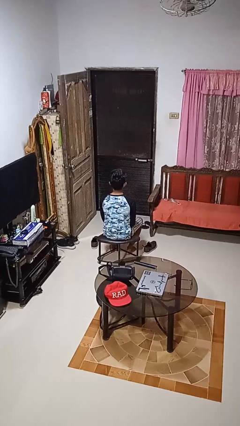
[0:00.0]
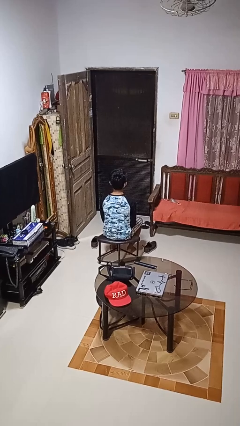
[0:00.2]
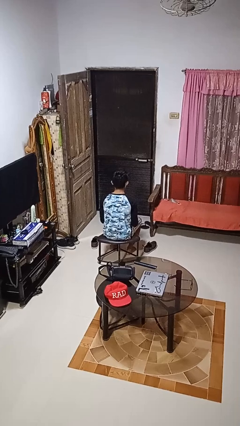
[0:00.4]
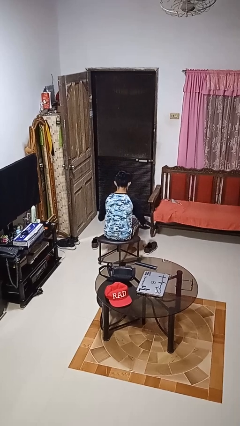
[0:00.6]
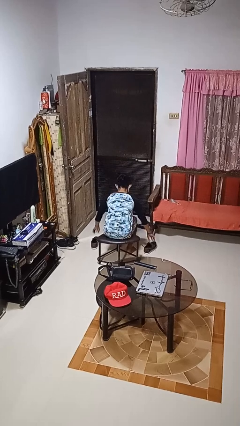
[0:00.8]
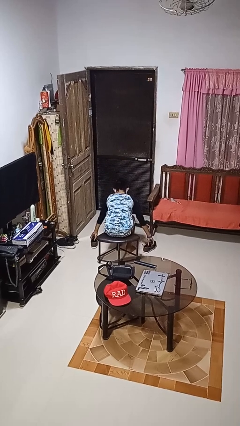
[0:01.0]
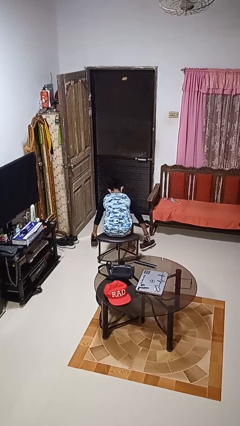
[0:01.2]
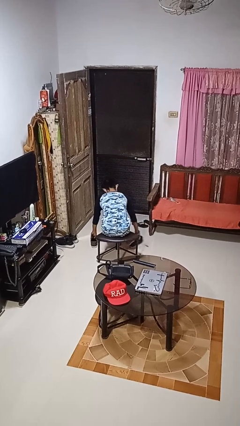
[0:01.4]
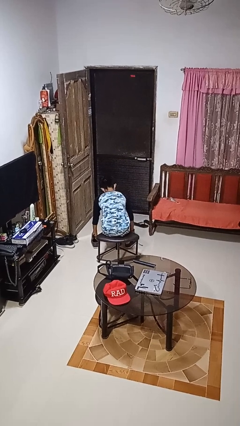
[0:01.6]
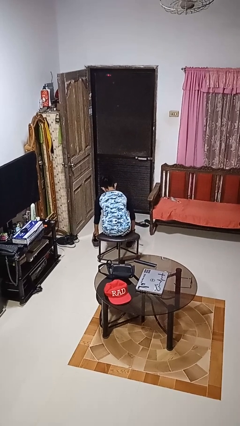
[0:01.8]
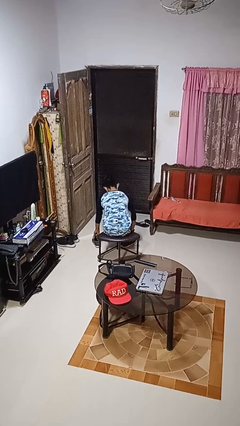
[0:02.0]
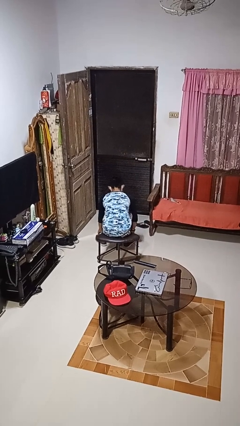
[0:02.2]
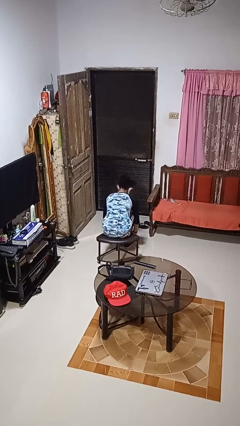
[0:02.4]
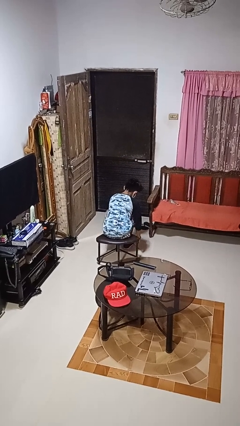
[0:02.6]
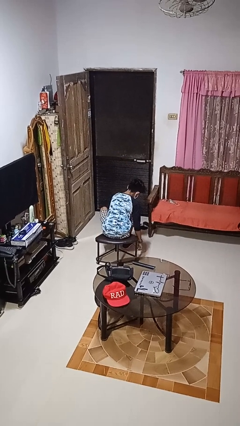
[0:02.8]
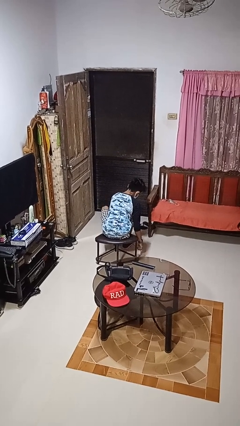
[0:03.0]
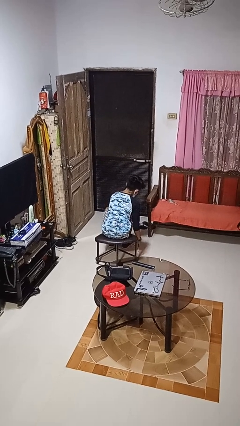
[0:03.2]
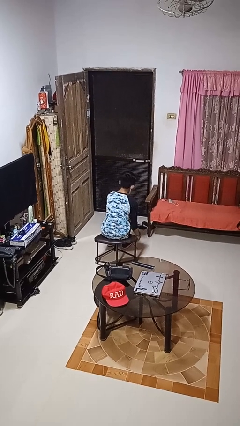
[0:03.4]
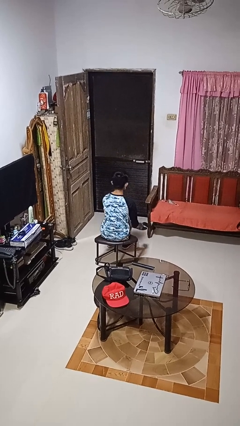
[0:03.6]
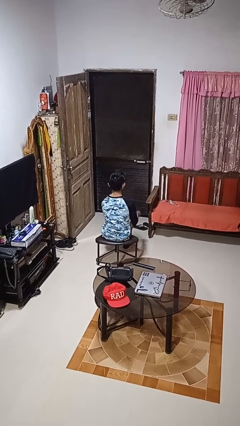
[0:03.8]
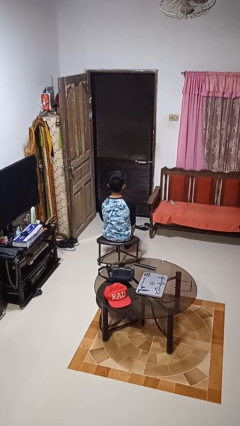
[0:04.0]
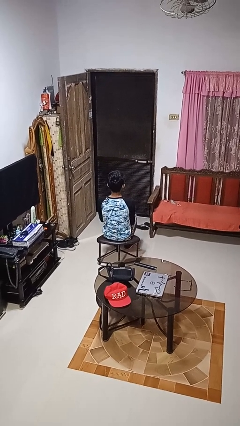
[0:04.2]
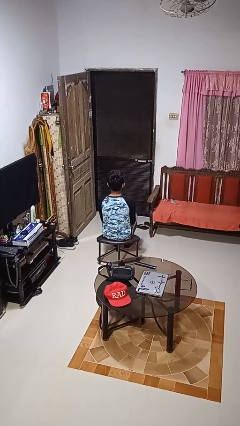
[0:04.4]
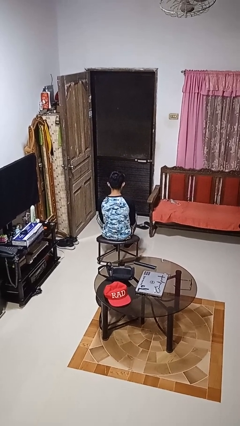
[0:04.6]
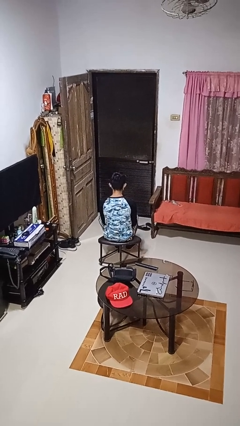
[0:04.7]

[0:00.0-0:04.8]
person puts on shoes

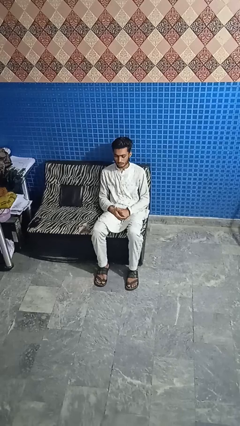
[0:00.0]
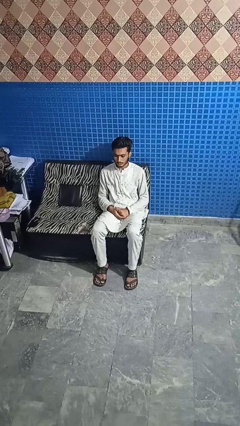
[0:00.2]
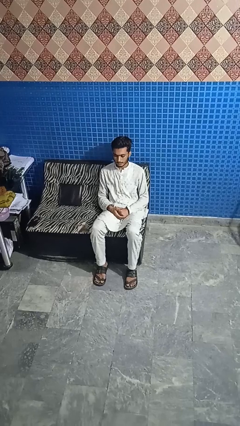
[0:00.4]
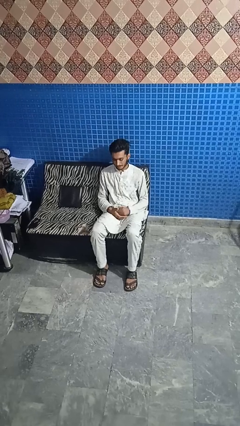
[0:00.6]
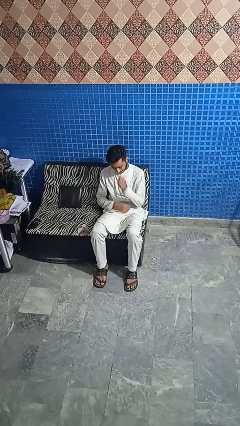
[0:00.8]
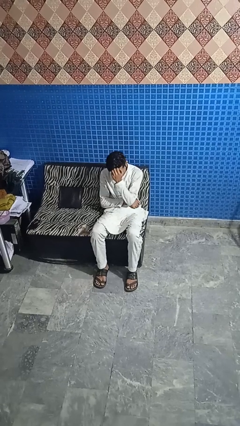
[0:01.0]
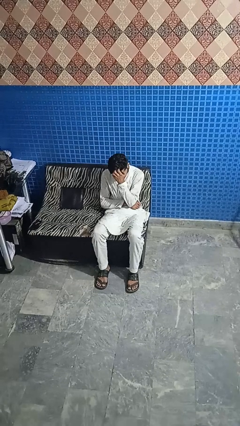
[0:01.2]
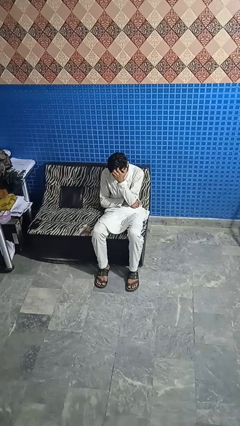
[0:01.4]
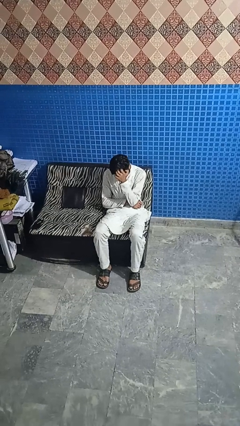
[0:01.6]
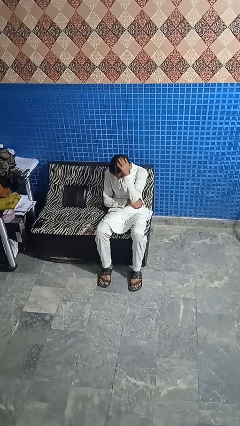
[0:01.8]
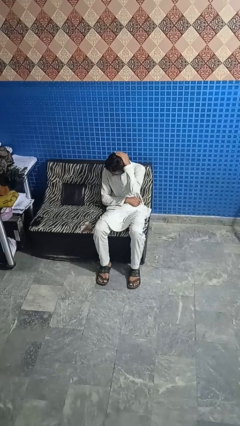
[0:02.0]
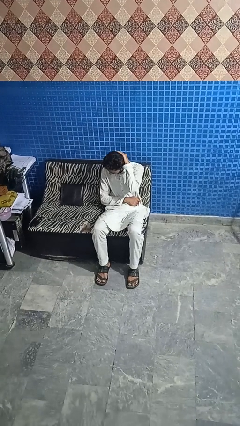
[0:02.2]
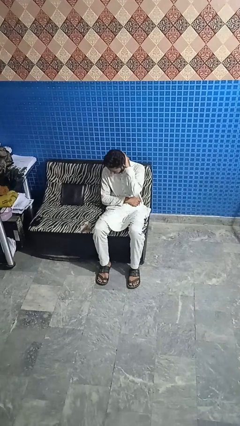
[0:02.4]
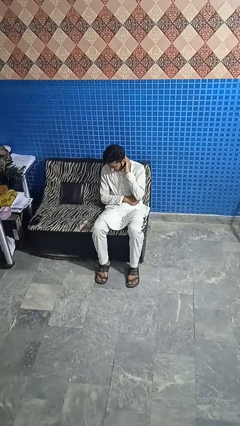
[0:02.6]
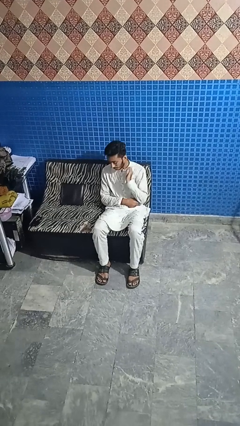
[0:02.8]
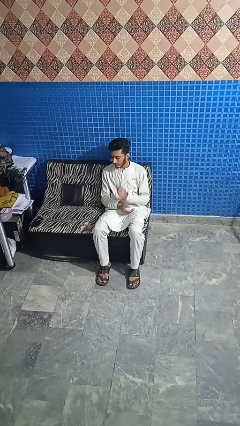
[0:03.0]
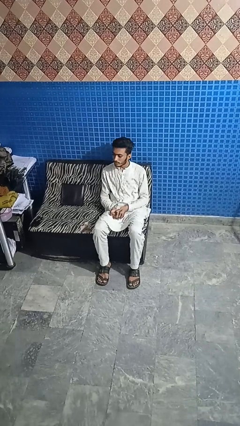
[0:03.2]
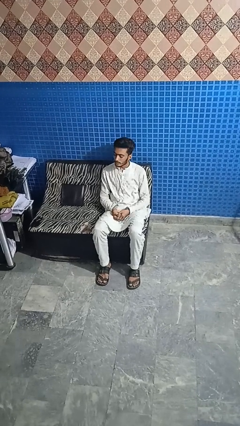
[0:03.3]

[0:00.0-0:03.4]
person strokes hair

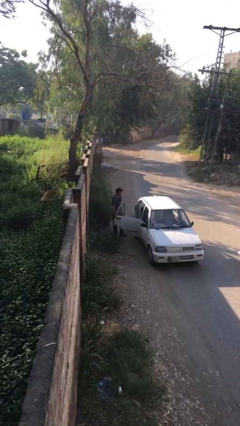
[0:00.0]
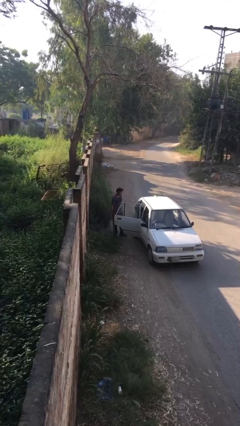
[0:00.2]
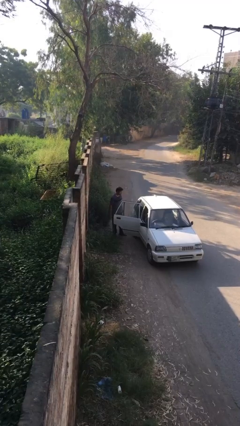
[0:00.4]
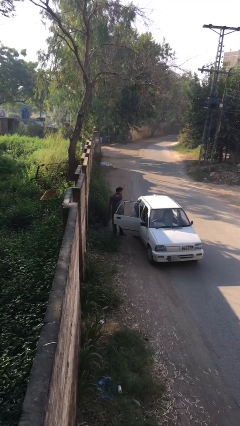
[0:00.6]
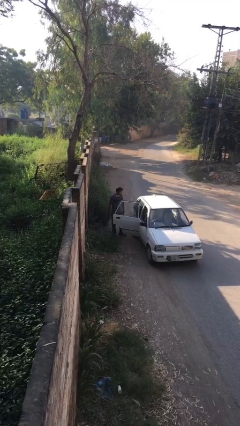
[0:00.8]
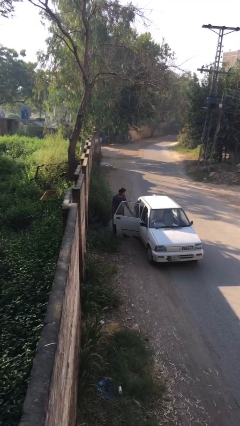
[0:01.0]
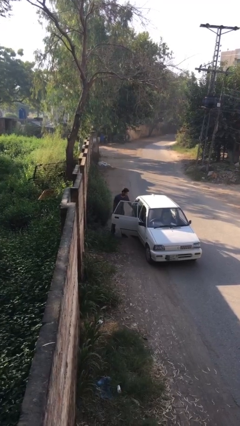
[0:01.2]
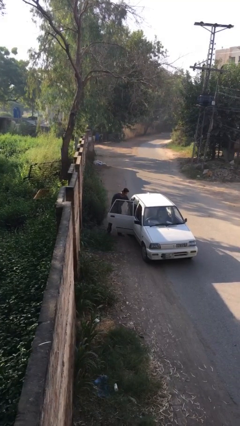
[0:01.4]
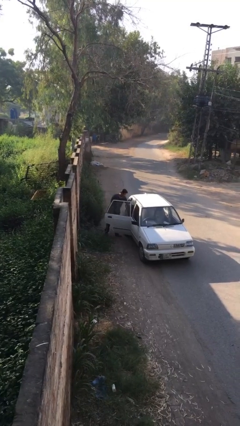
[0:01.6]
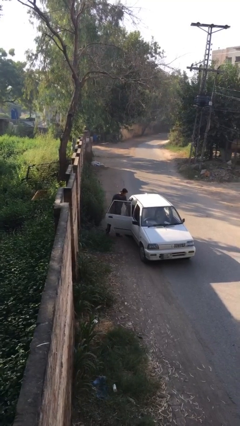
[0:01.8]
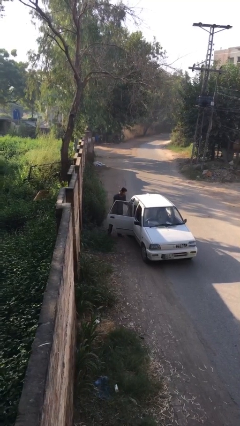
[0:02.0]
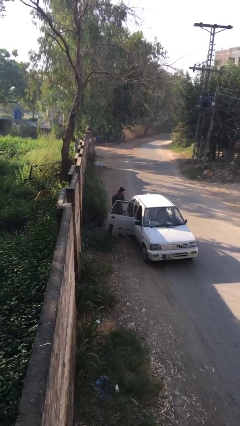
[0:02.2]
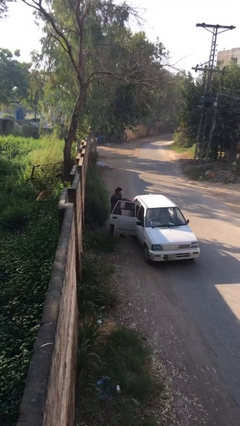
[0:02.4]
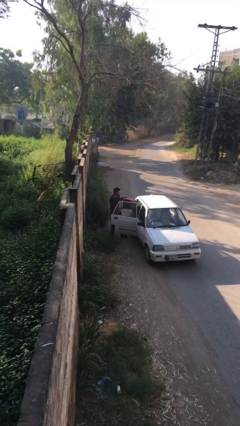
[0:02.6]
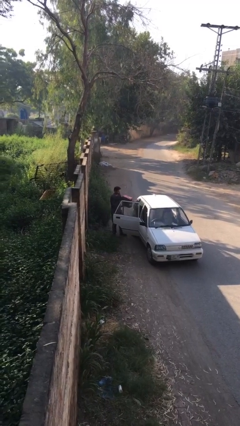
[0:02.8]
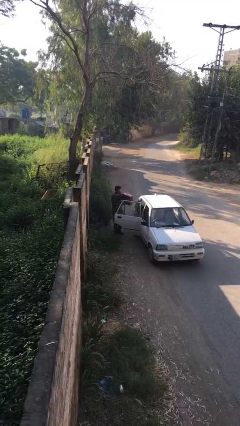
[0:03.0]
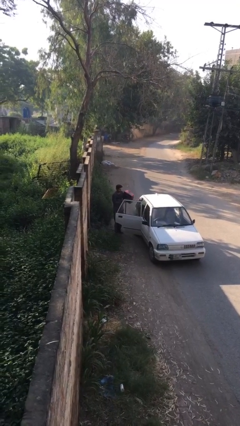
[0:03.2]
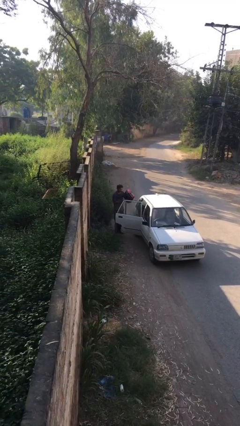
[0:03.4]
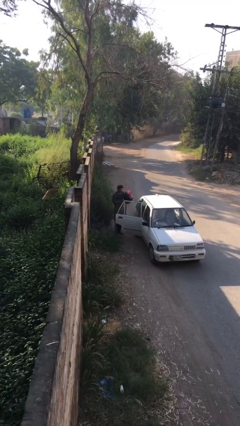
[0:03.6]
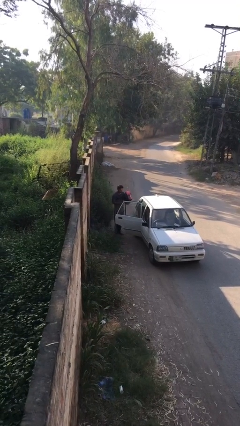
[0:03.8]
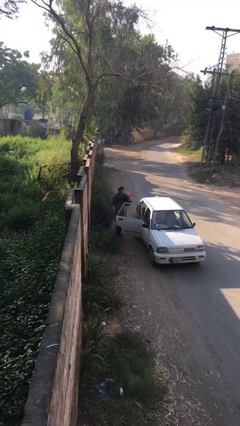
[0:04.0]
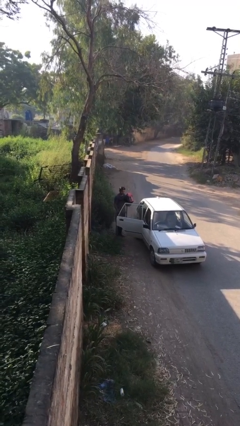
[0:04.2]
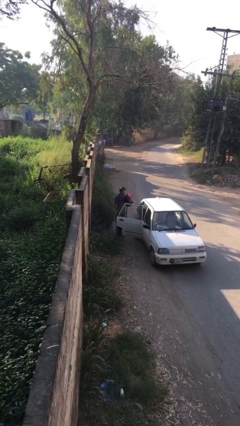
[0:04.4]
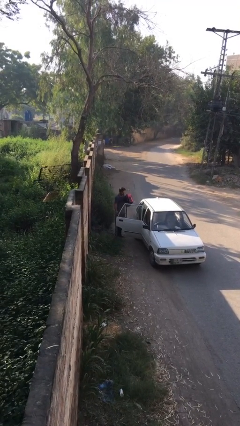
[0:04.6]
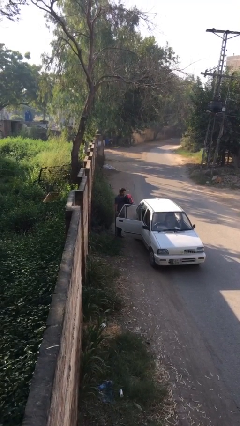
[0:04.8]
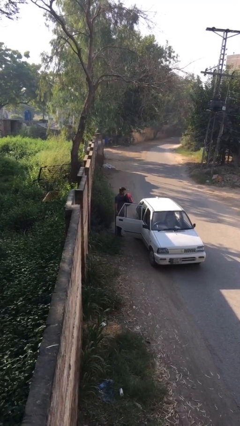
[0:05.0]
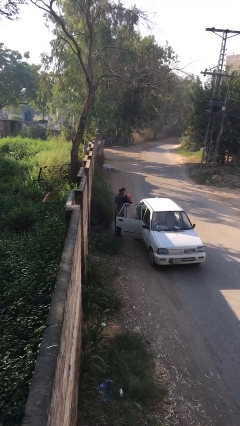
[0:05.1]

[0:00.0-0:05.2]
person unloads car

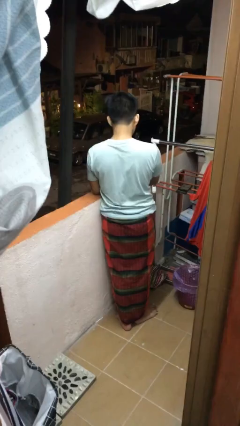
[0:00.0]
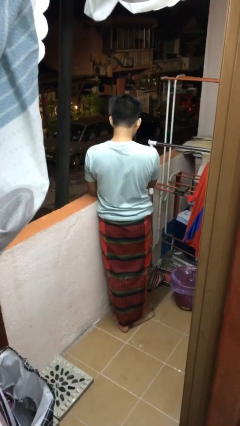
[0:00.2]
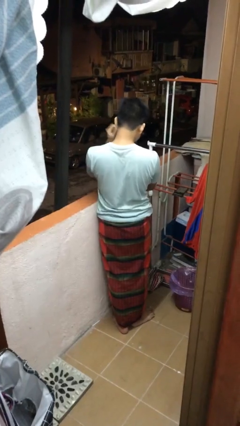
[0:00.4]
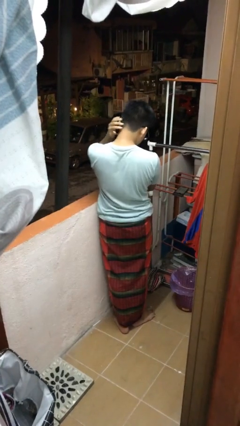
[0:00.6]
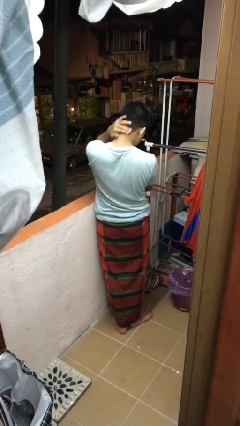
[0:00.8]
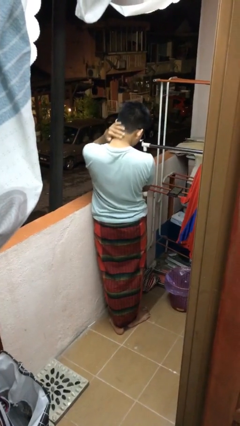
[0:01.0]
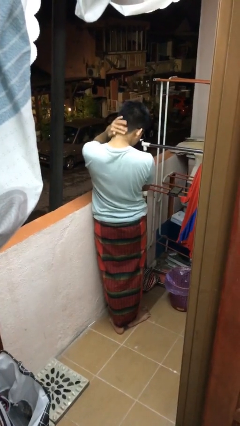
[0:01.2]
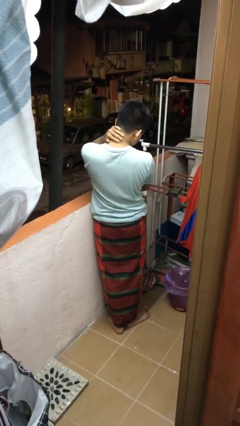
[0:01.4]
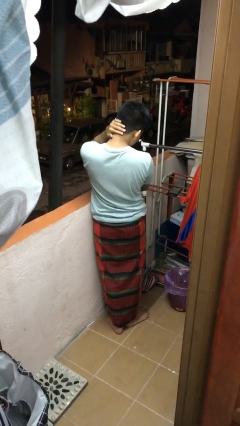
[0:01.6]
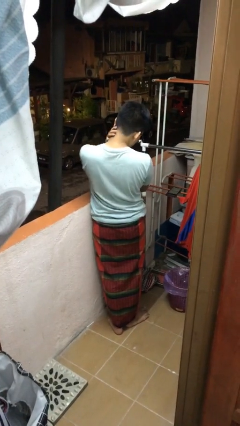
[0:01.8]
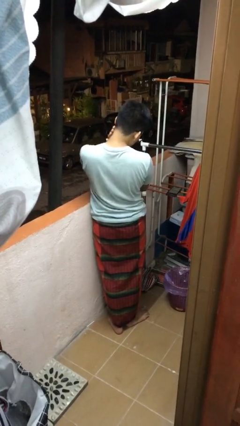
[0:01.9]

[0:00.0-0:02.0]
person rubs neck

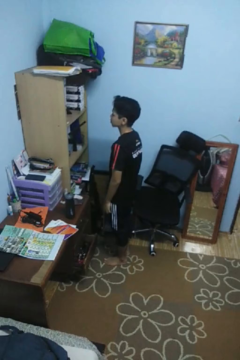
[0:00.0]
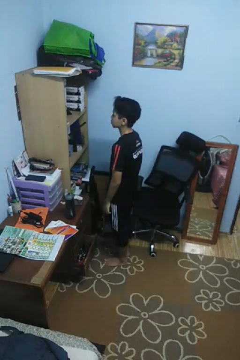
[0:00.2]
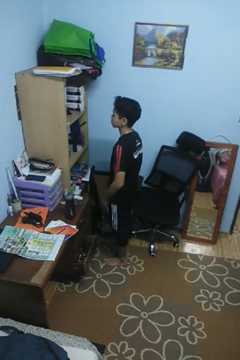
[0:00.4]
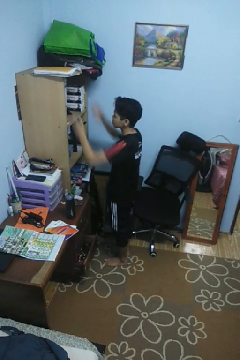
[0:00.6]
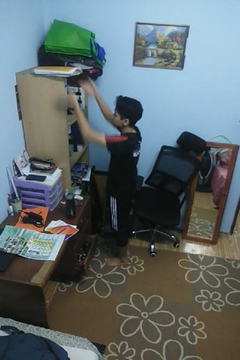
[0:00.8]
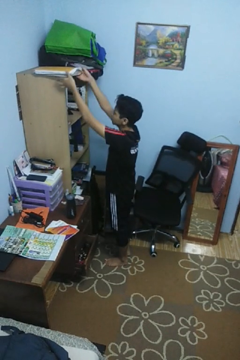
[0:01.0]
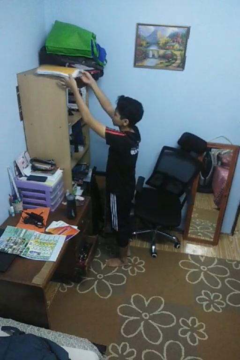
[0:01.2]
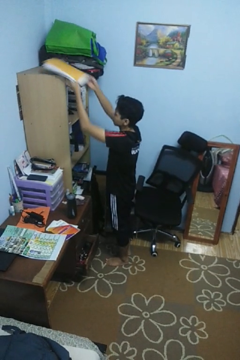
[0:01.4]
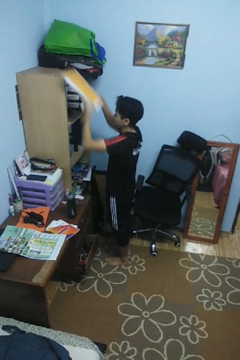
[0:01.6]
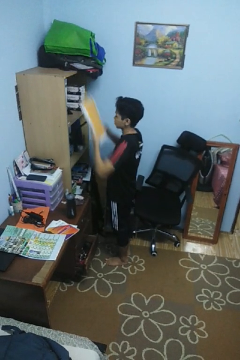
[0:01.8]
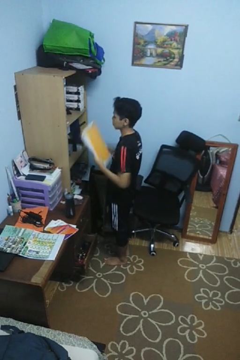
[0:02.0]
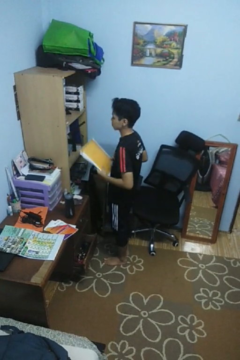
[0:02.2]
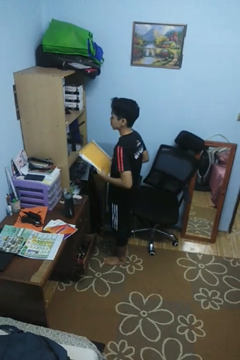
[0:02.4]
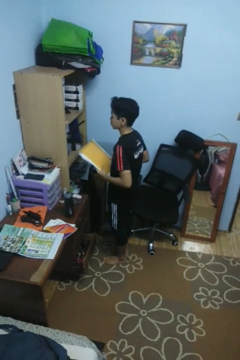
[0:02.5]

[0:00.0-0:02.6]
person picks up object from shelf

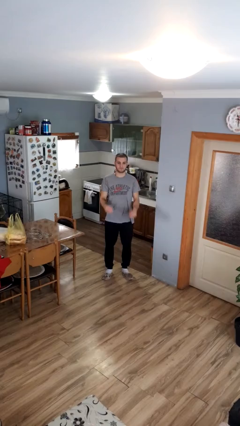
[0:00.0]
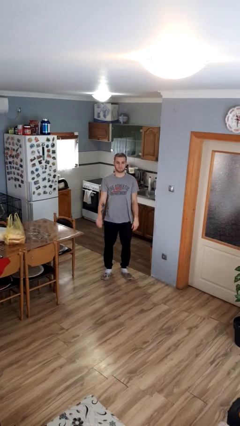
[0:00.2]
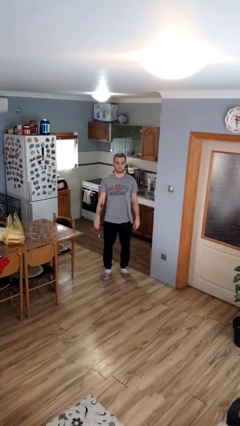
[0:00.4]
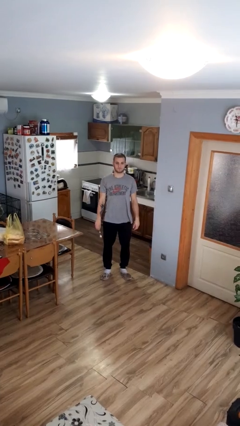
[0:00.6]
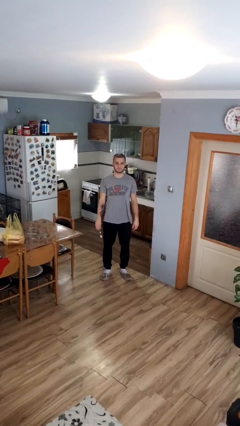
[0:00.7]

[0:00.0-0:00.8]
person takes off glasses
